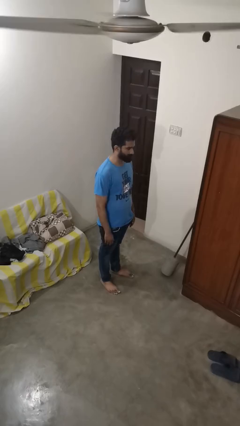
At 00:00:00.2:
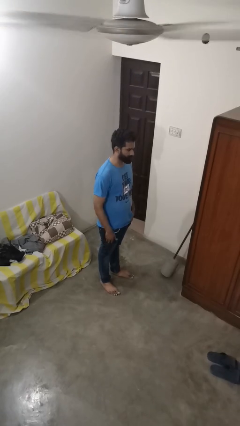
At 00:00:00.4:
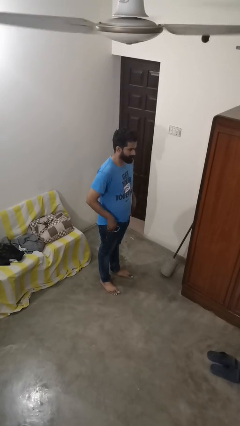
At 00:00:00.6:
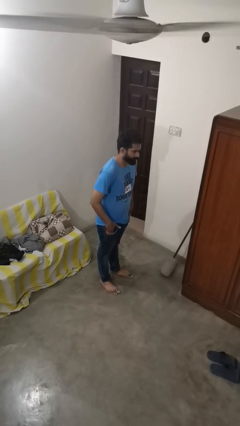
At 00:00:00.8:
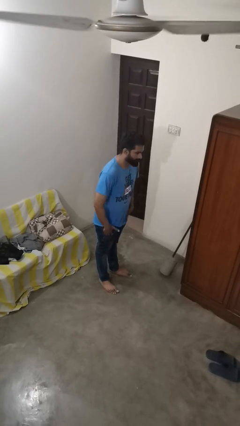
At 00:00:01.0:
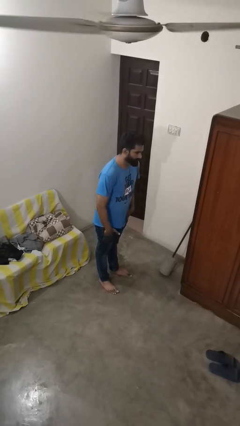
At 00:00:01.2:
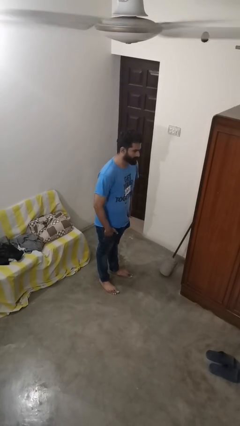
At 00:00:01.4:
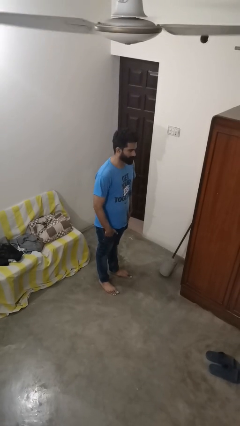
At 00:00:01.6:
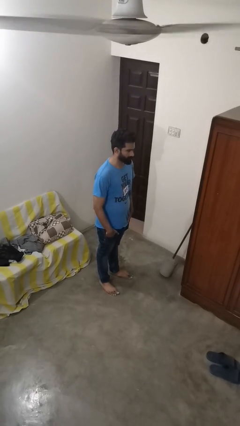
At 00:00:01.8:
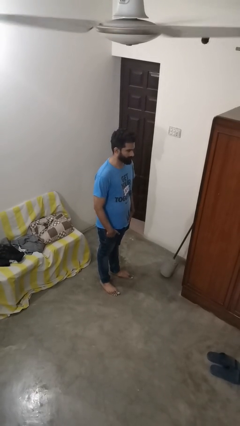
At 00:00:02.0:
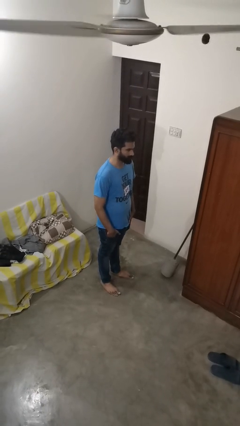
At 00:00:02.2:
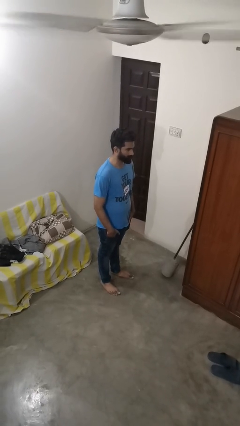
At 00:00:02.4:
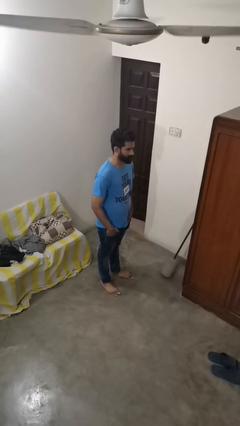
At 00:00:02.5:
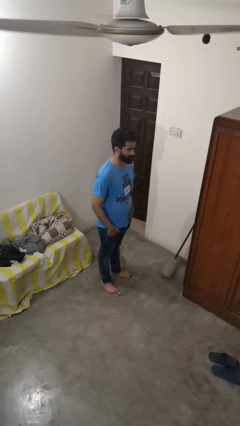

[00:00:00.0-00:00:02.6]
person puts hands in back pockets

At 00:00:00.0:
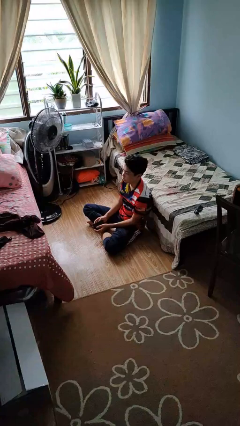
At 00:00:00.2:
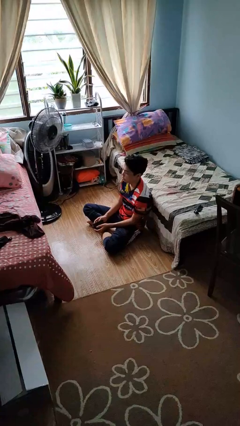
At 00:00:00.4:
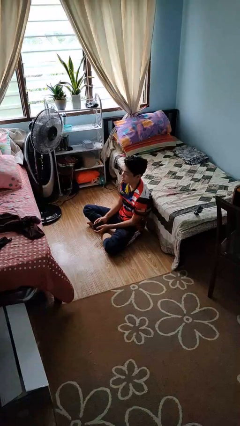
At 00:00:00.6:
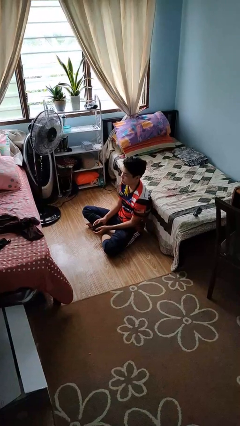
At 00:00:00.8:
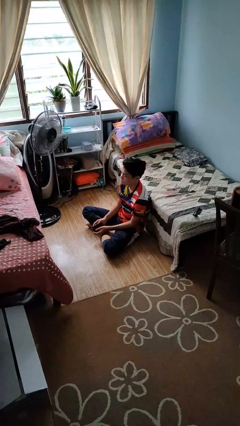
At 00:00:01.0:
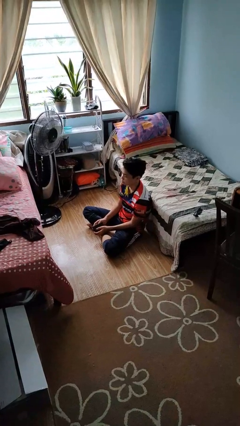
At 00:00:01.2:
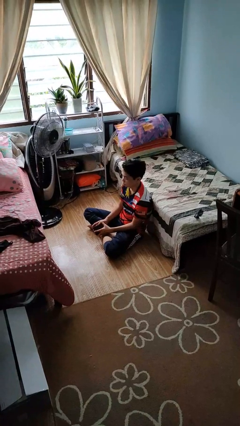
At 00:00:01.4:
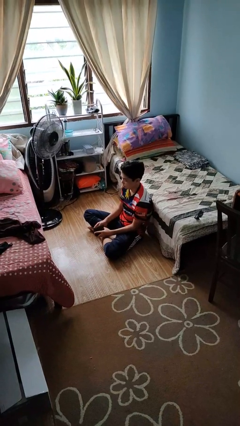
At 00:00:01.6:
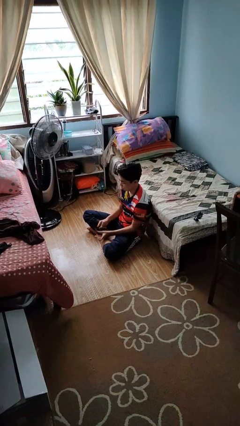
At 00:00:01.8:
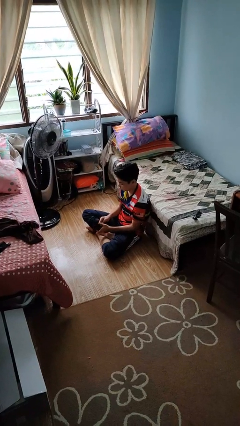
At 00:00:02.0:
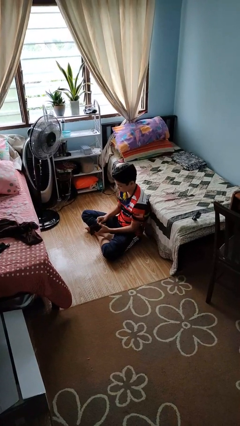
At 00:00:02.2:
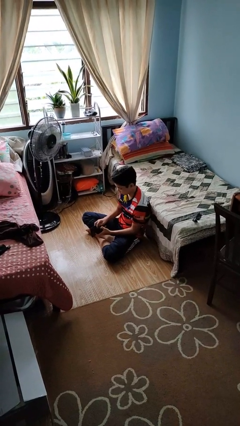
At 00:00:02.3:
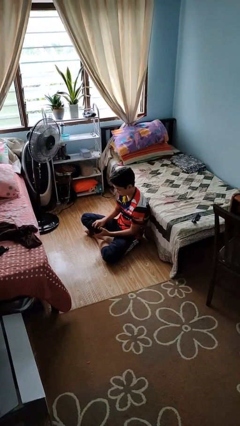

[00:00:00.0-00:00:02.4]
person searches in purse

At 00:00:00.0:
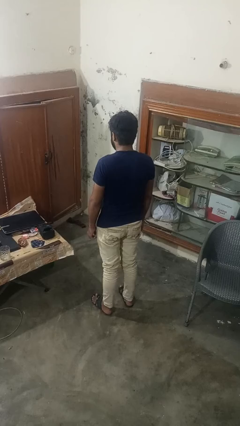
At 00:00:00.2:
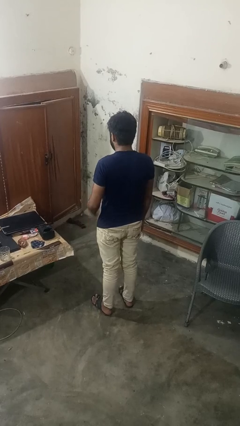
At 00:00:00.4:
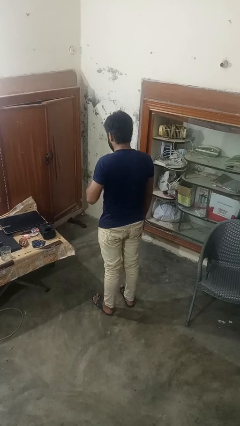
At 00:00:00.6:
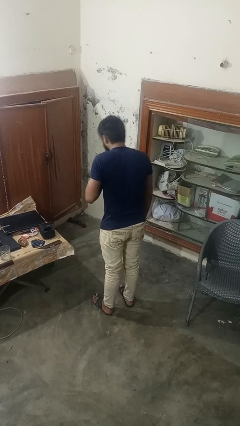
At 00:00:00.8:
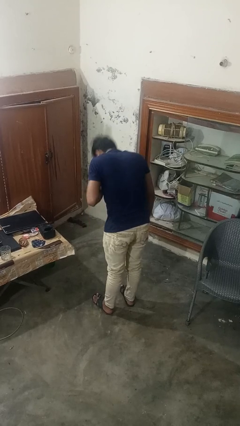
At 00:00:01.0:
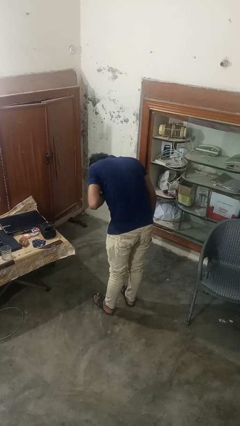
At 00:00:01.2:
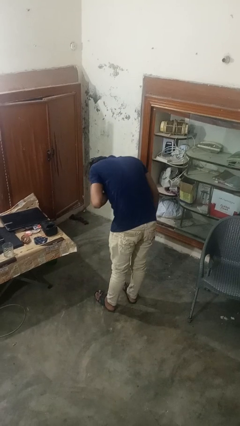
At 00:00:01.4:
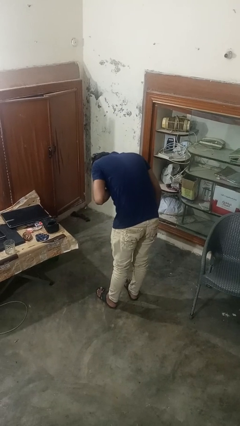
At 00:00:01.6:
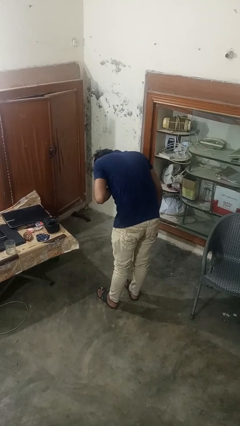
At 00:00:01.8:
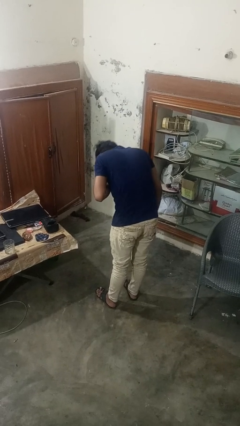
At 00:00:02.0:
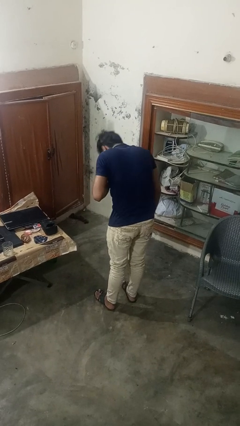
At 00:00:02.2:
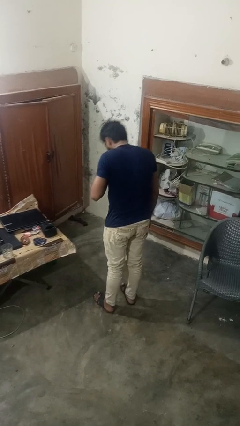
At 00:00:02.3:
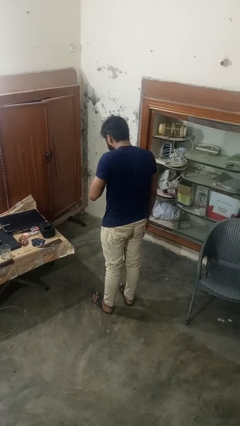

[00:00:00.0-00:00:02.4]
person bows

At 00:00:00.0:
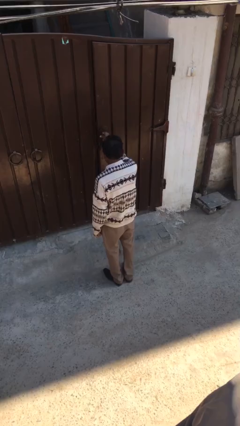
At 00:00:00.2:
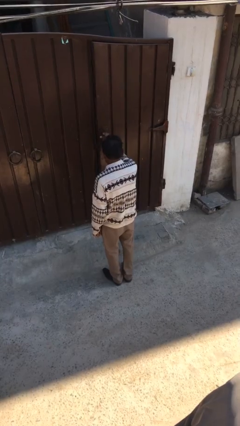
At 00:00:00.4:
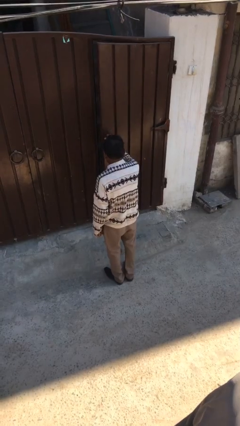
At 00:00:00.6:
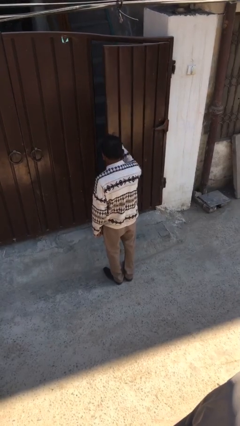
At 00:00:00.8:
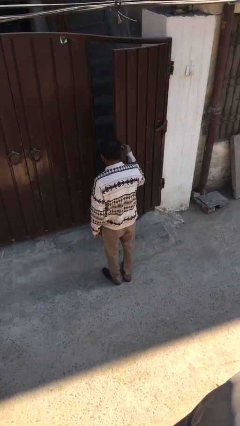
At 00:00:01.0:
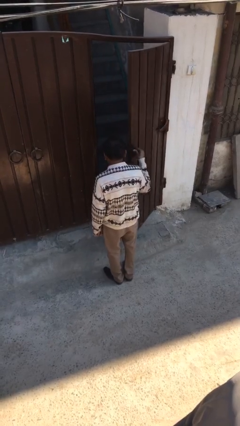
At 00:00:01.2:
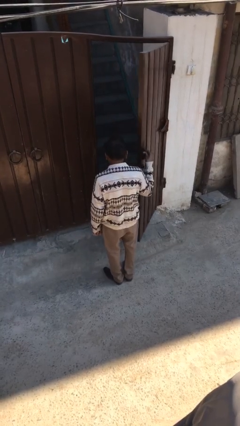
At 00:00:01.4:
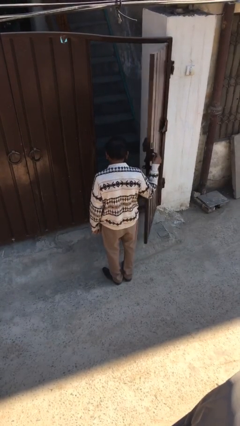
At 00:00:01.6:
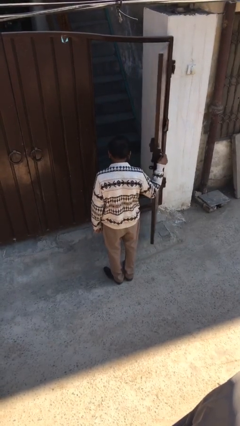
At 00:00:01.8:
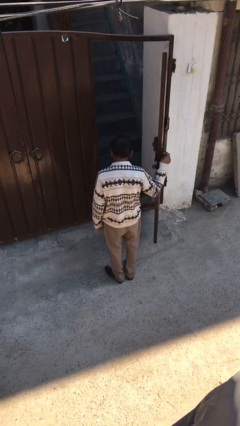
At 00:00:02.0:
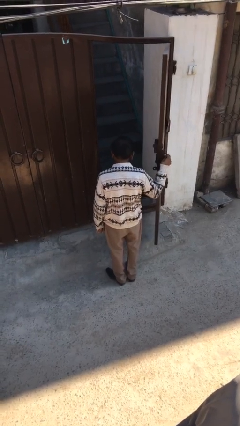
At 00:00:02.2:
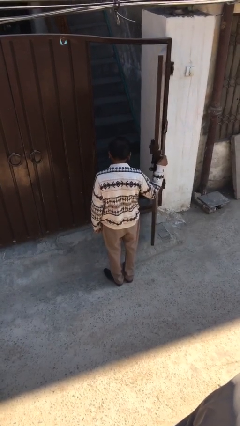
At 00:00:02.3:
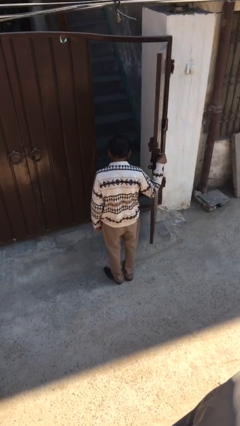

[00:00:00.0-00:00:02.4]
person opens facility door

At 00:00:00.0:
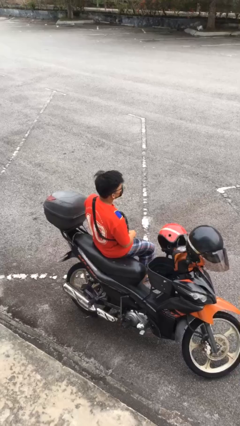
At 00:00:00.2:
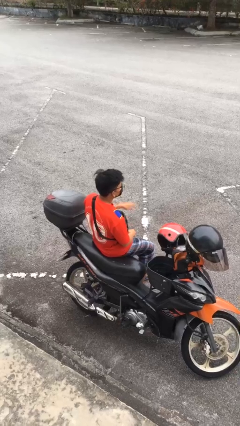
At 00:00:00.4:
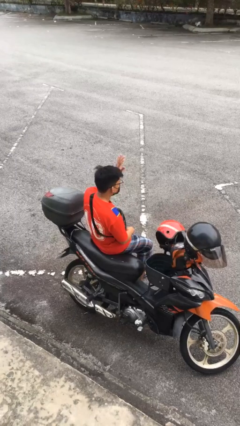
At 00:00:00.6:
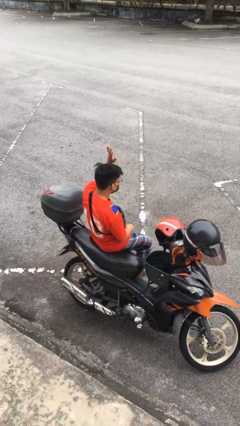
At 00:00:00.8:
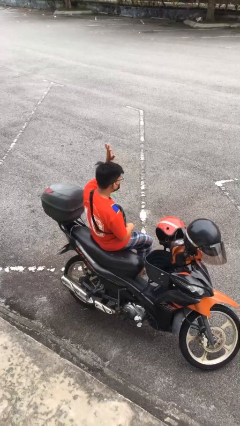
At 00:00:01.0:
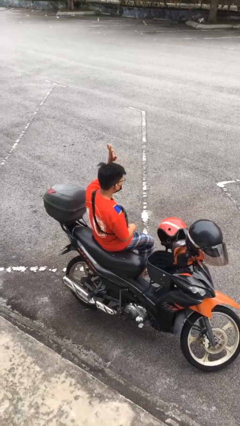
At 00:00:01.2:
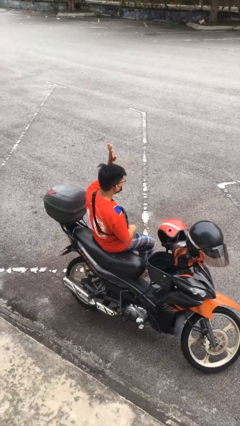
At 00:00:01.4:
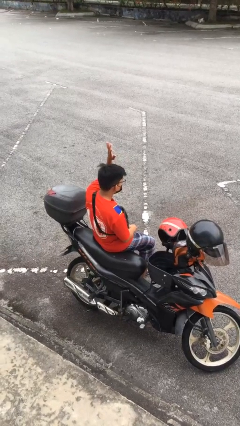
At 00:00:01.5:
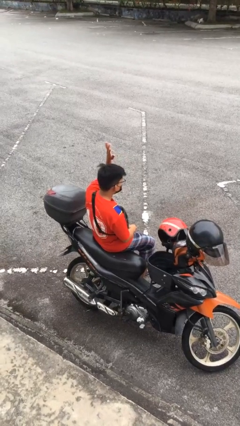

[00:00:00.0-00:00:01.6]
person gestures raise hand

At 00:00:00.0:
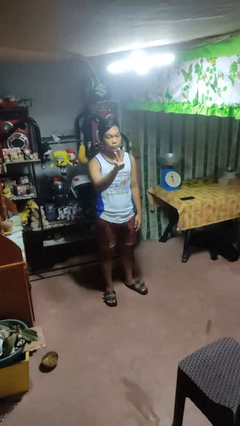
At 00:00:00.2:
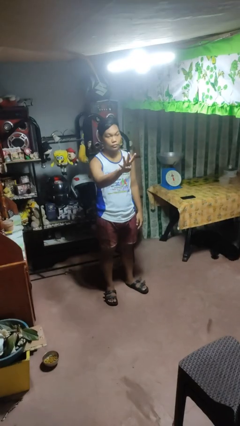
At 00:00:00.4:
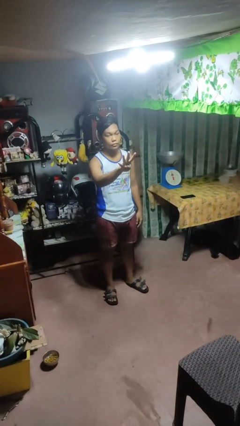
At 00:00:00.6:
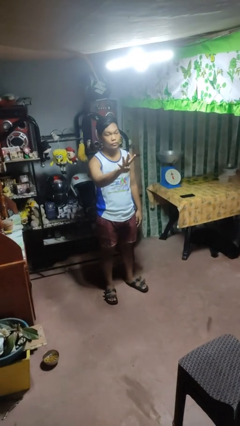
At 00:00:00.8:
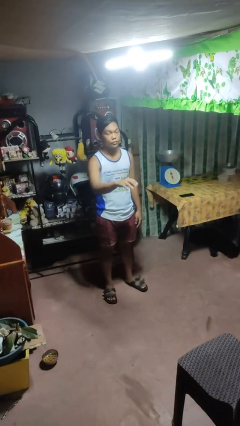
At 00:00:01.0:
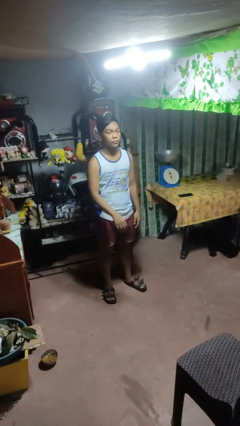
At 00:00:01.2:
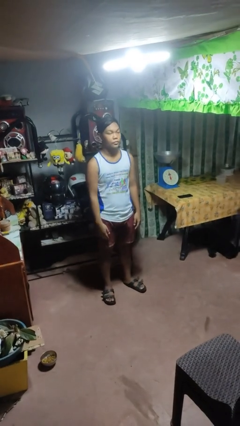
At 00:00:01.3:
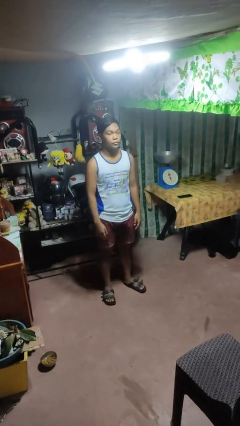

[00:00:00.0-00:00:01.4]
person gestures number four

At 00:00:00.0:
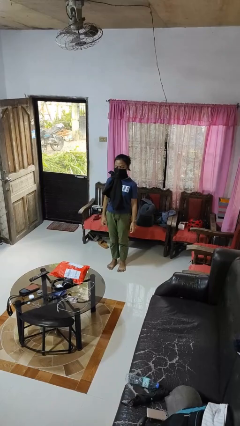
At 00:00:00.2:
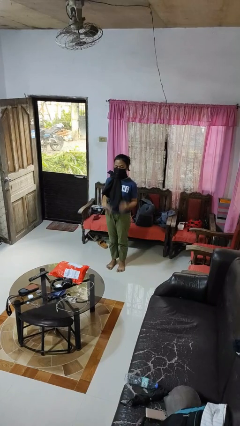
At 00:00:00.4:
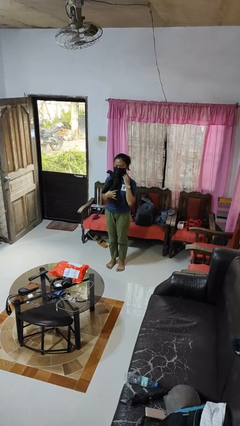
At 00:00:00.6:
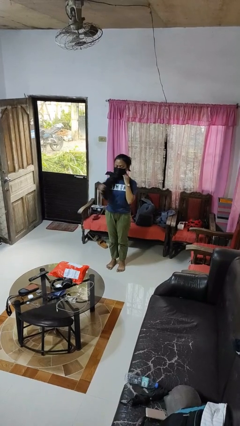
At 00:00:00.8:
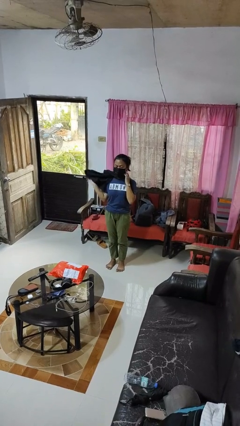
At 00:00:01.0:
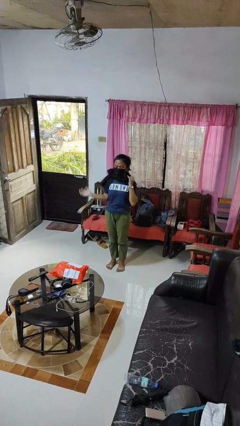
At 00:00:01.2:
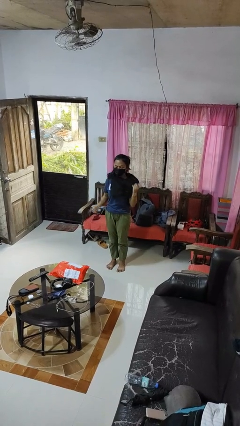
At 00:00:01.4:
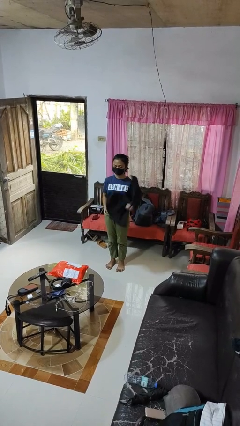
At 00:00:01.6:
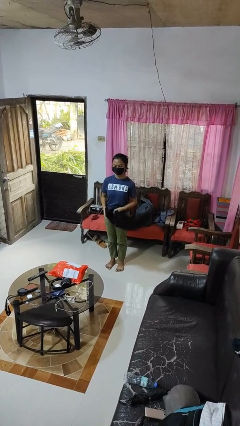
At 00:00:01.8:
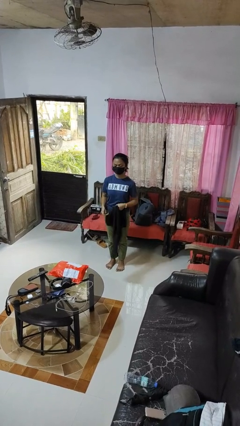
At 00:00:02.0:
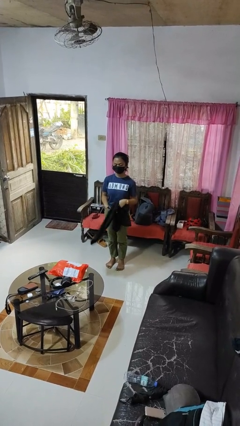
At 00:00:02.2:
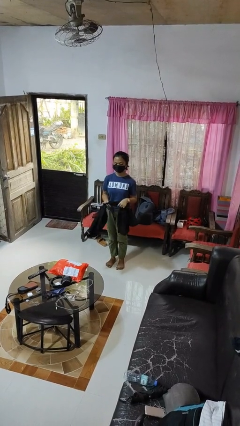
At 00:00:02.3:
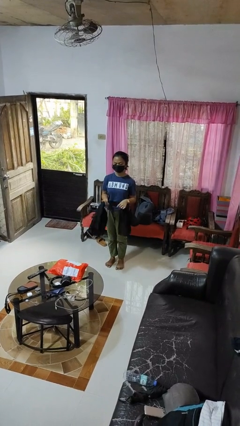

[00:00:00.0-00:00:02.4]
person takes off scarf

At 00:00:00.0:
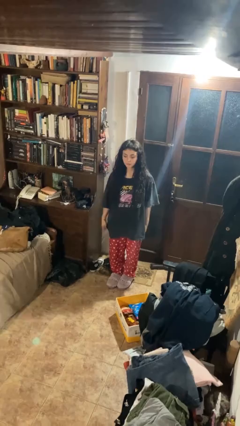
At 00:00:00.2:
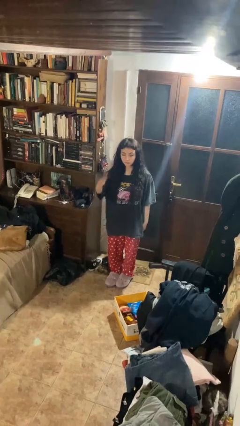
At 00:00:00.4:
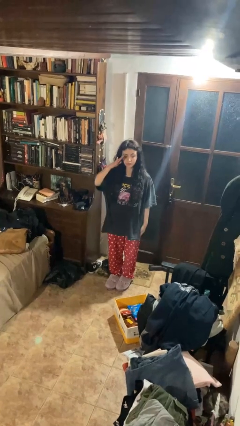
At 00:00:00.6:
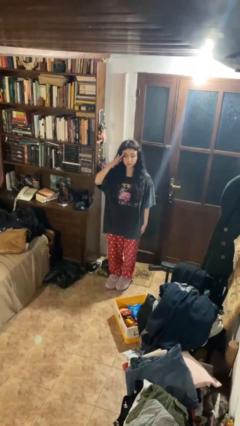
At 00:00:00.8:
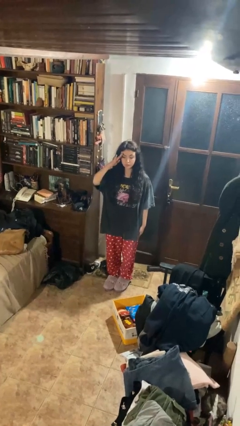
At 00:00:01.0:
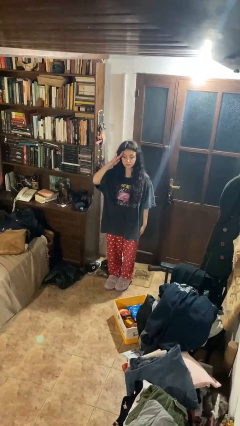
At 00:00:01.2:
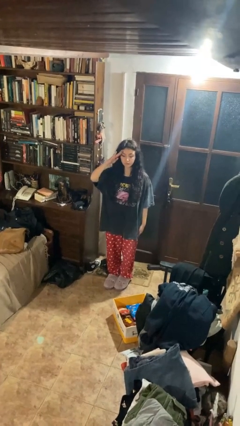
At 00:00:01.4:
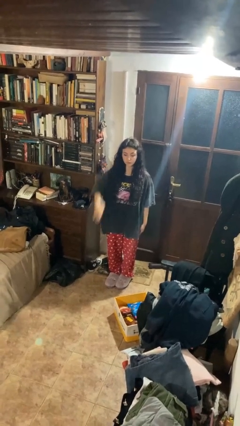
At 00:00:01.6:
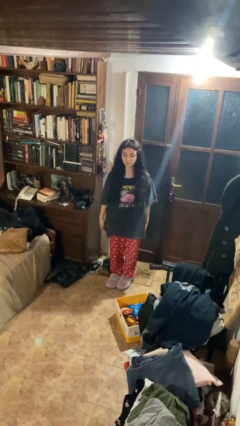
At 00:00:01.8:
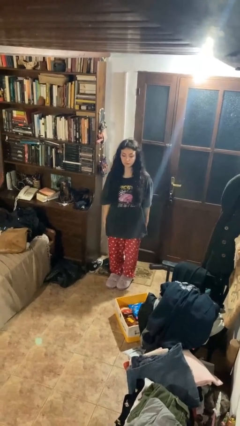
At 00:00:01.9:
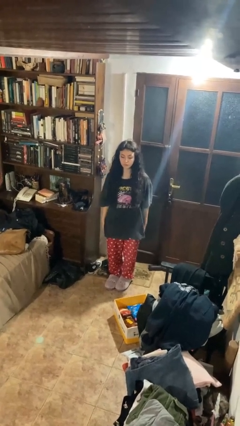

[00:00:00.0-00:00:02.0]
person salutes
